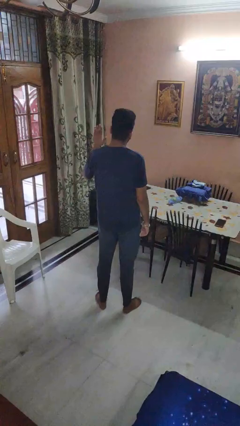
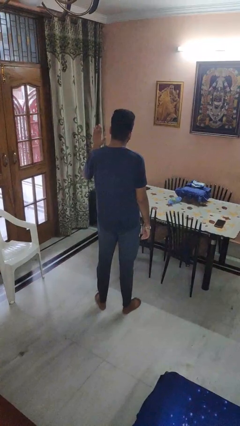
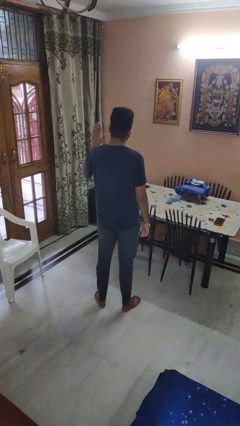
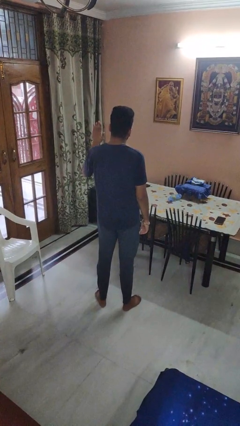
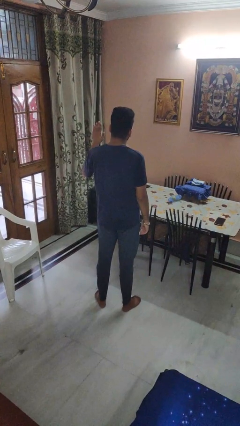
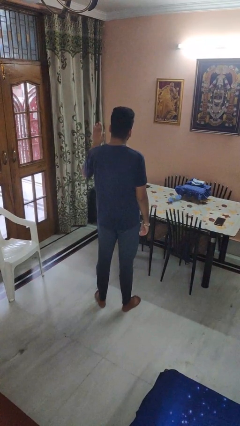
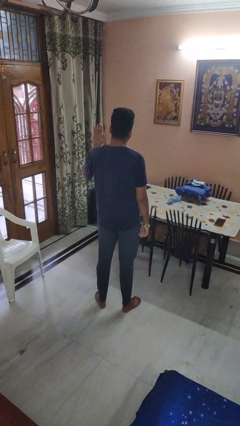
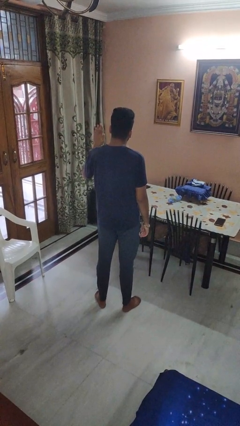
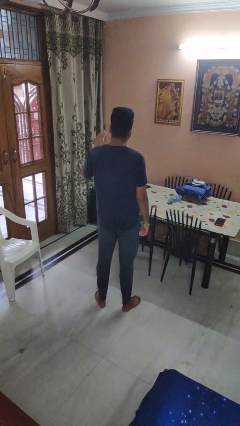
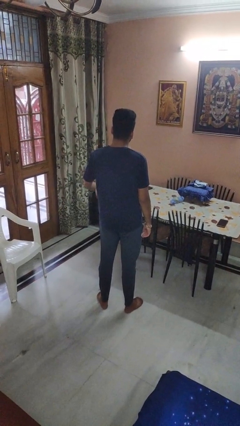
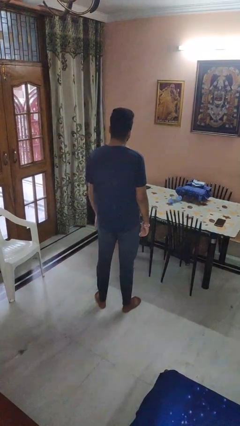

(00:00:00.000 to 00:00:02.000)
person gestures number five

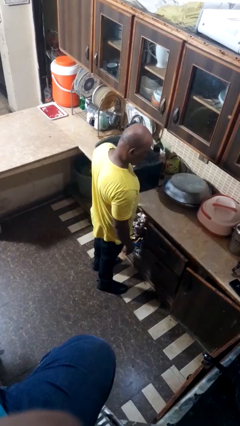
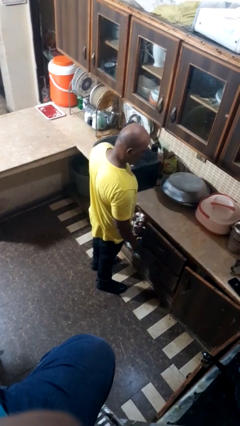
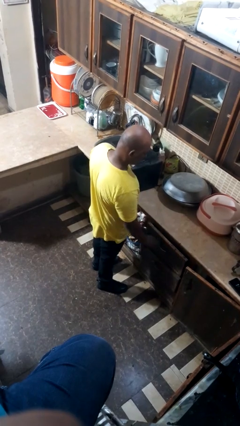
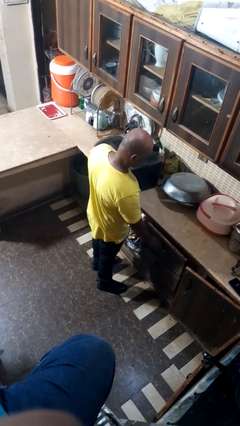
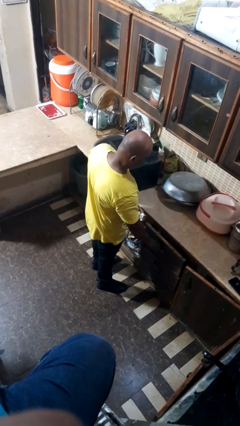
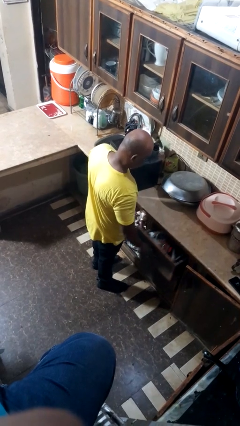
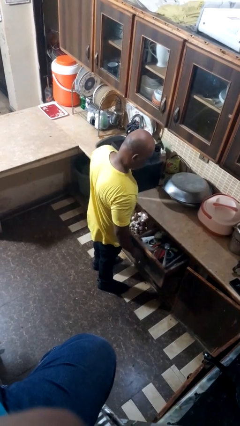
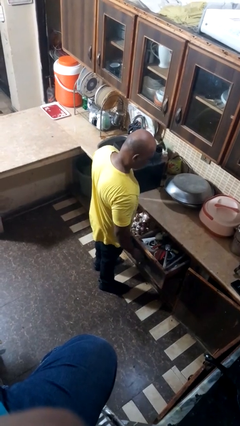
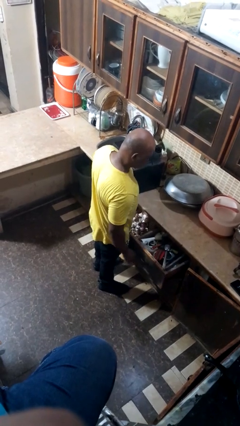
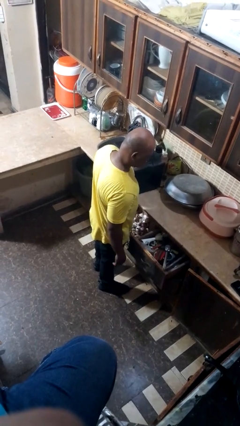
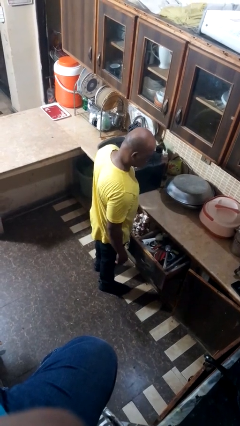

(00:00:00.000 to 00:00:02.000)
person opens dresser drawer

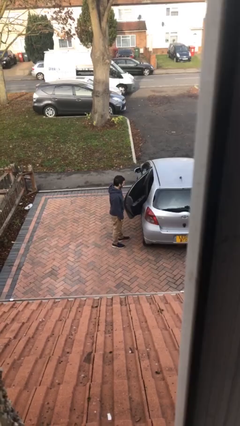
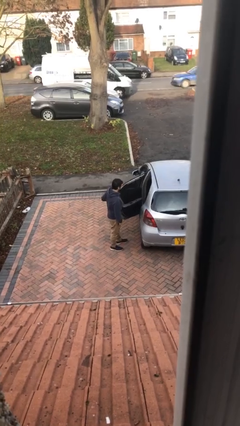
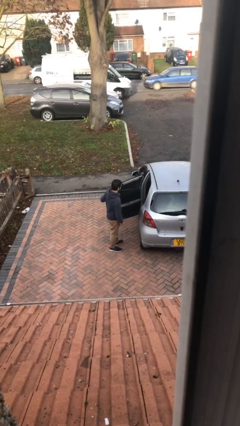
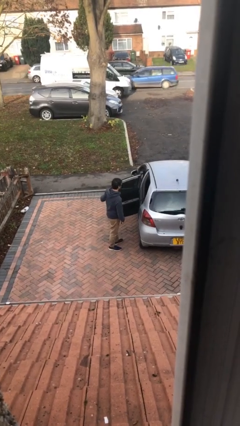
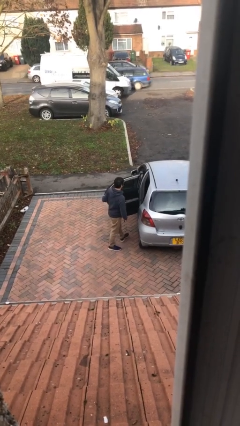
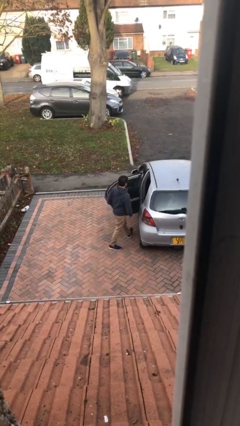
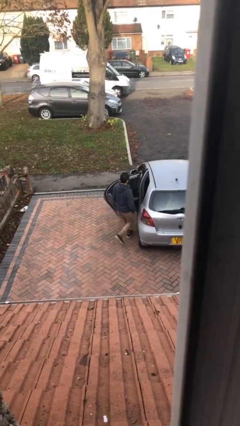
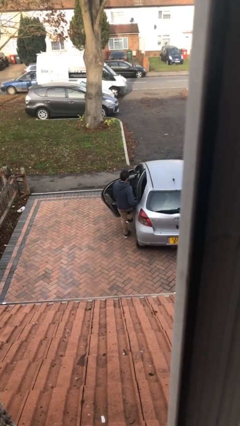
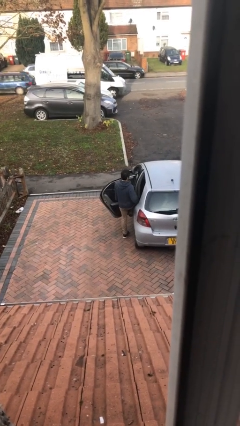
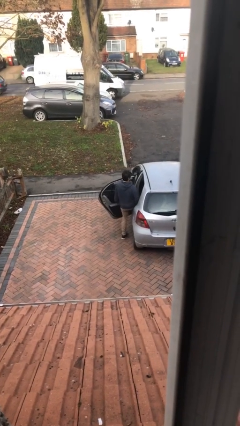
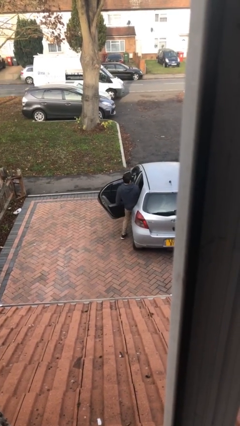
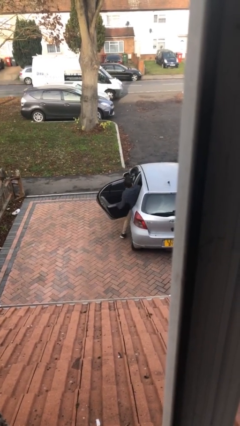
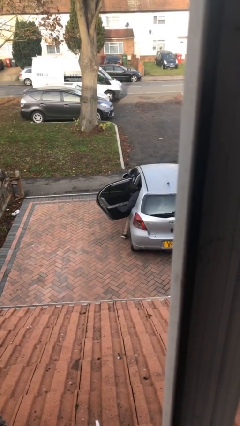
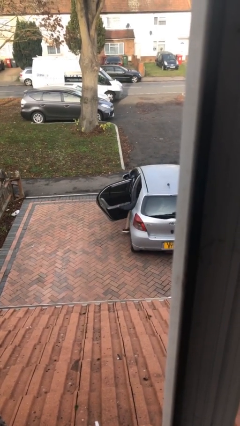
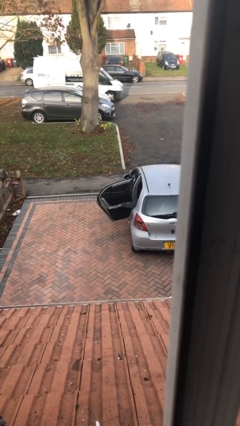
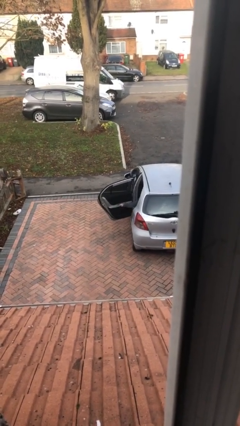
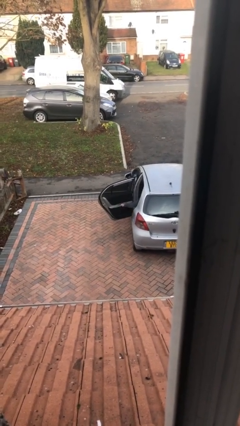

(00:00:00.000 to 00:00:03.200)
person enters car

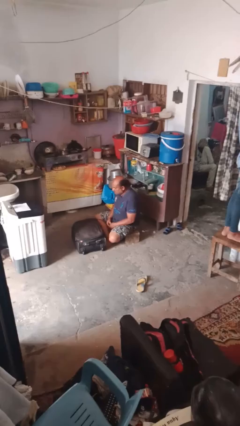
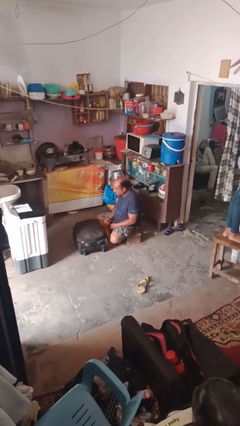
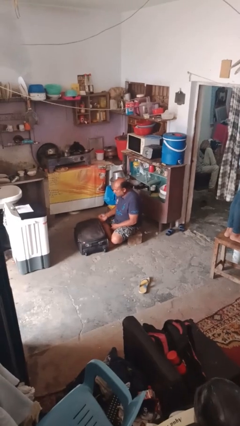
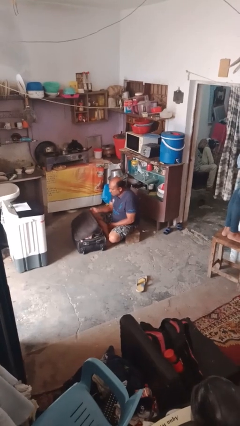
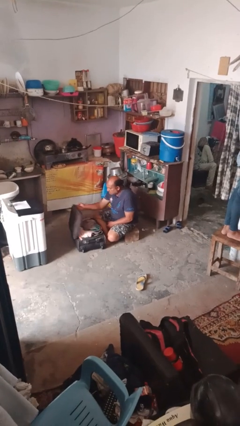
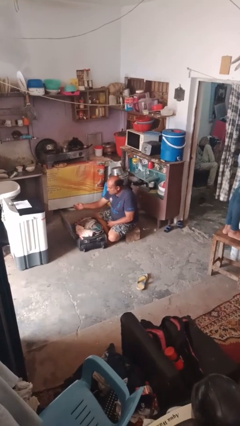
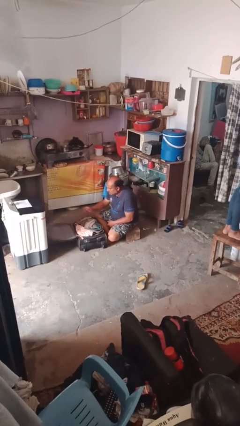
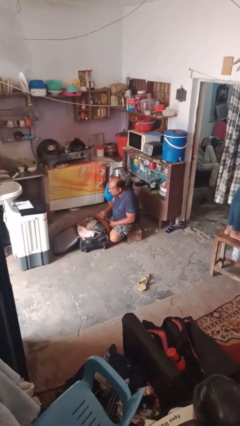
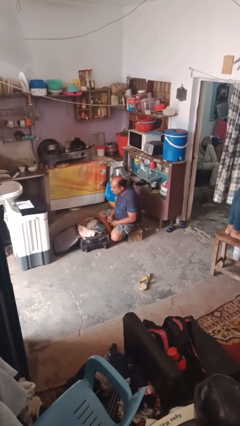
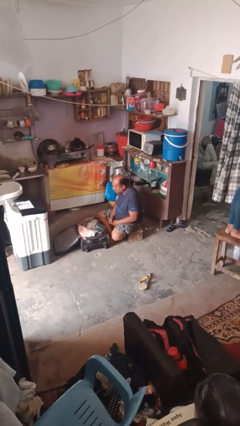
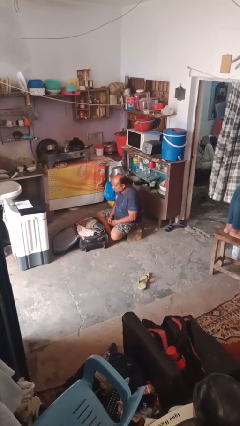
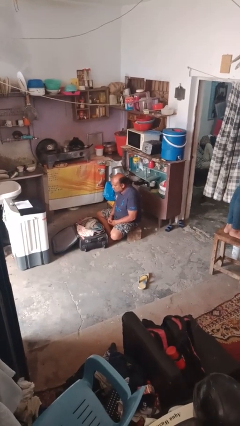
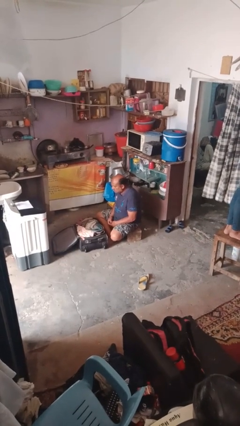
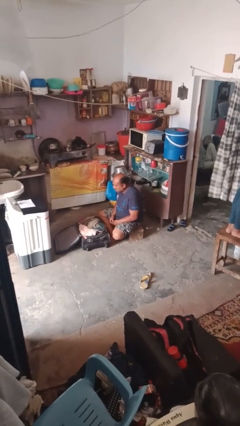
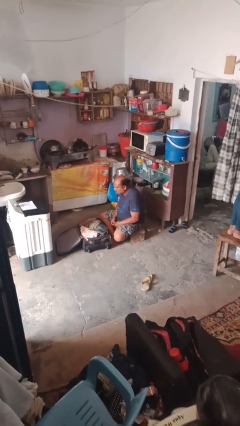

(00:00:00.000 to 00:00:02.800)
person opens suitcase

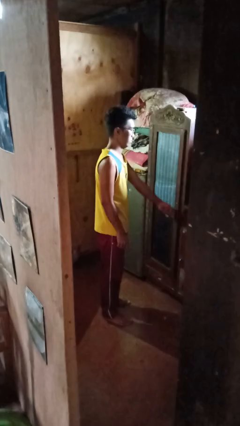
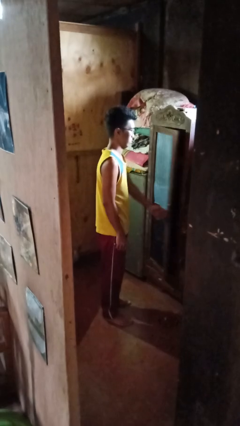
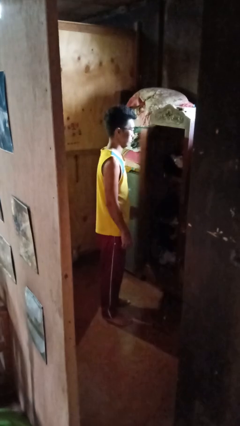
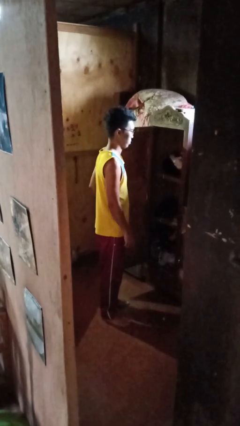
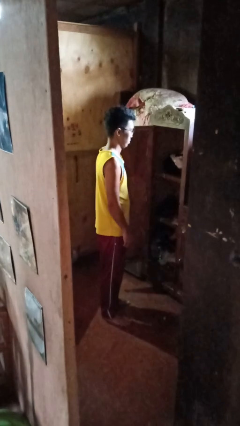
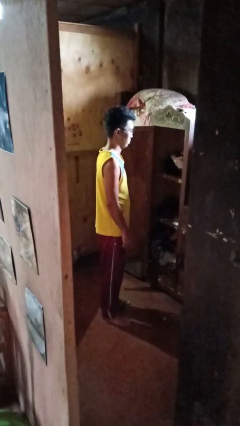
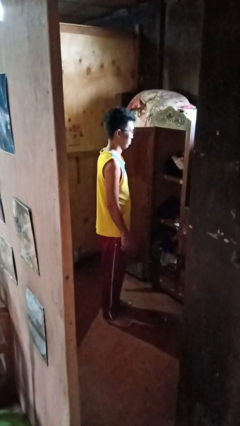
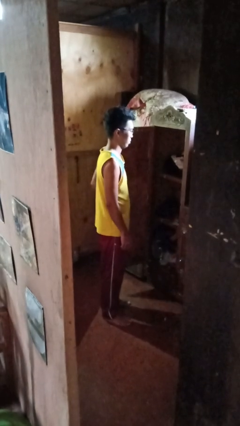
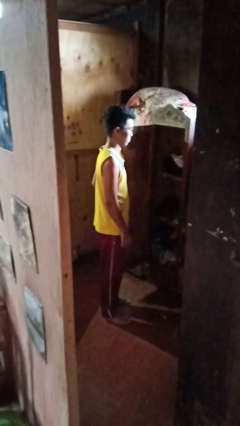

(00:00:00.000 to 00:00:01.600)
person opens closet door

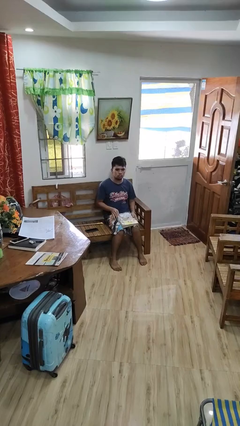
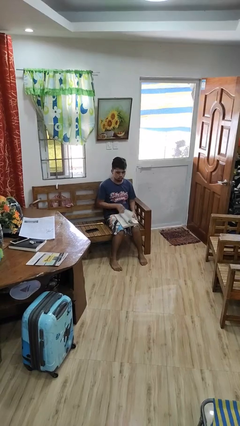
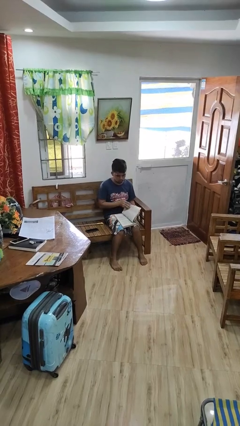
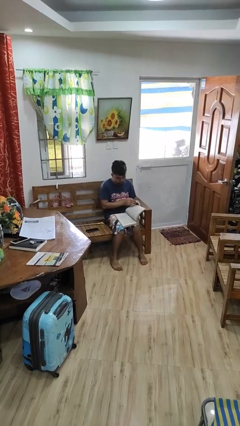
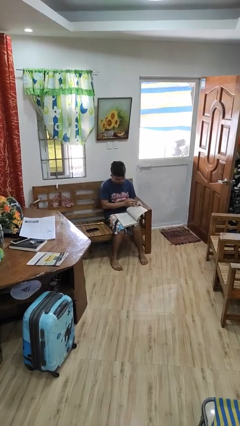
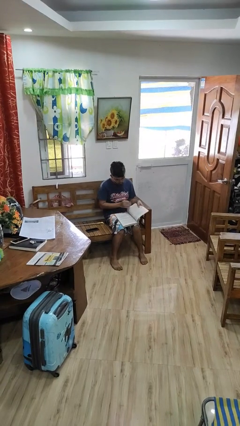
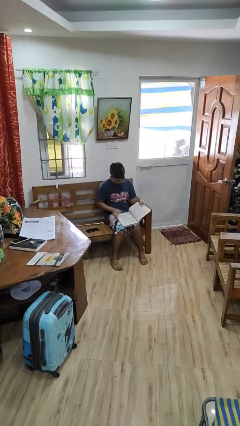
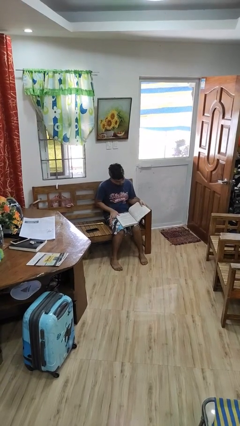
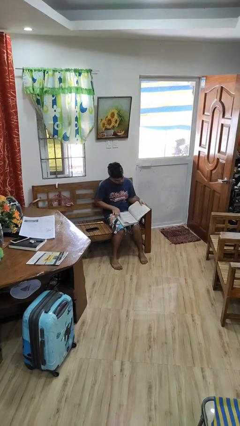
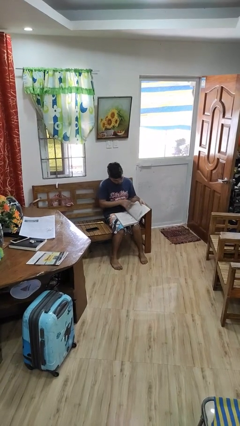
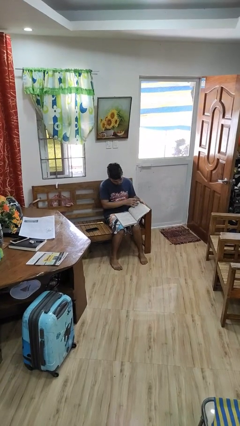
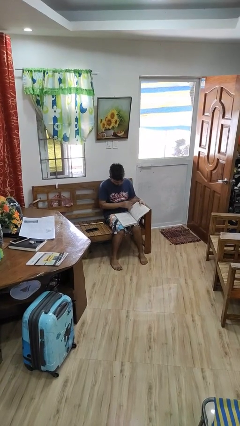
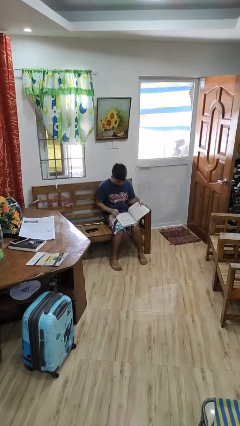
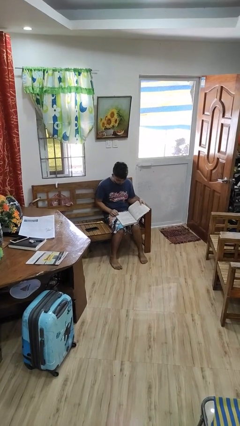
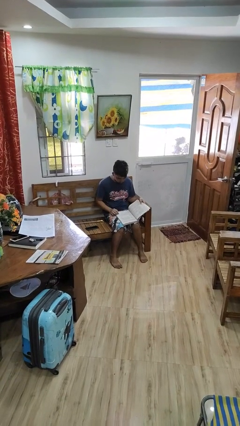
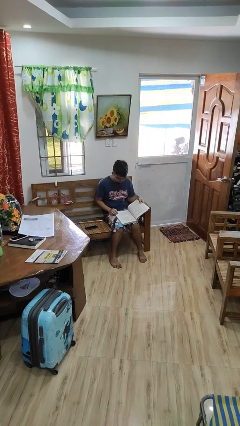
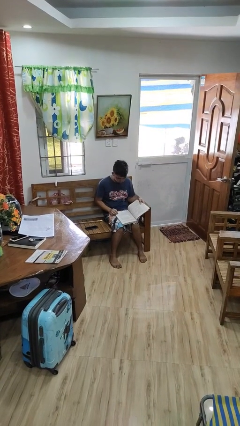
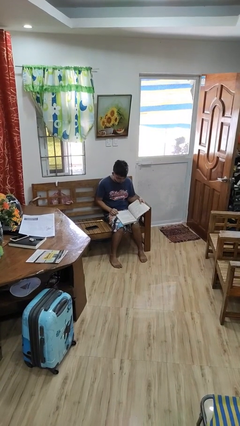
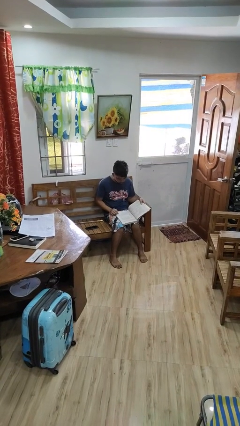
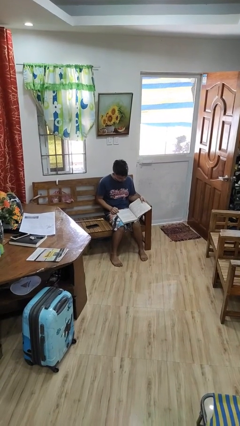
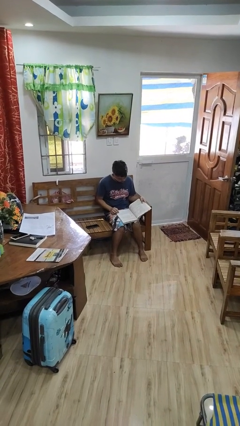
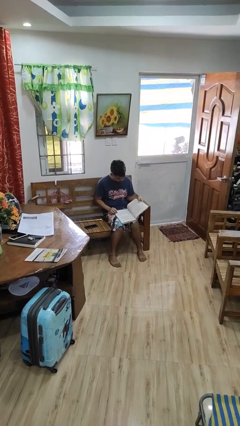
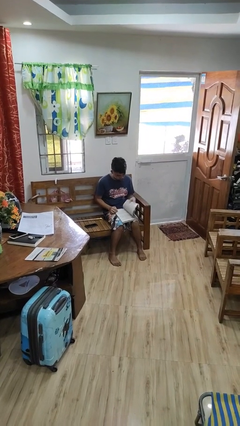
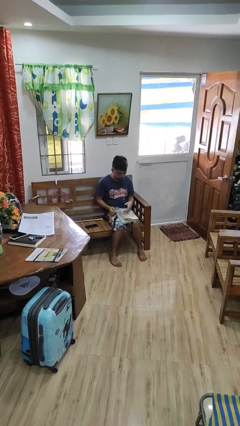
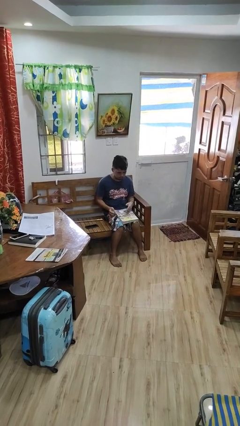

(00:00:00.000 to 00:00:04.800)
person reads book

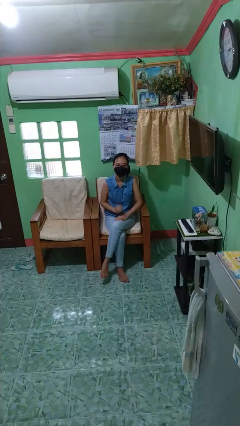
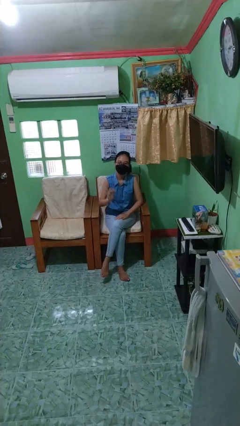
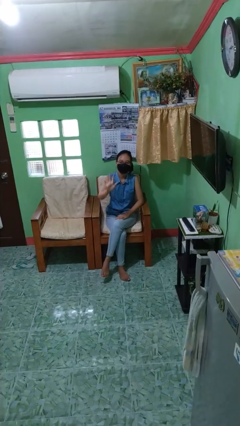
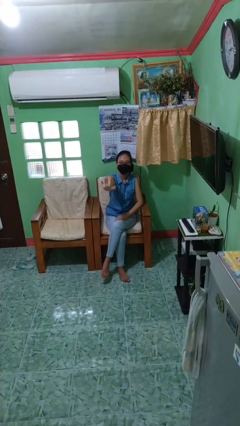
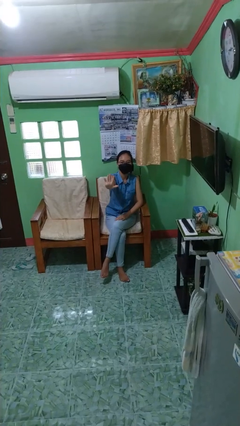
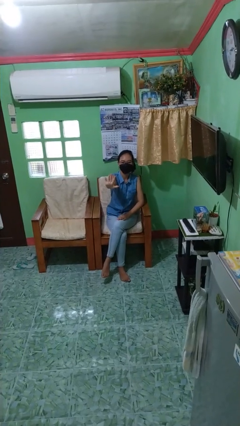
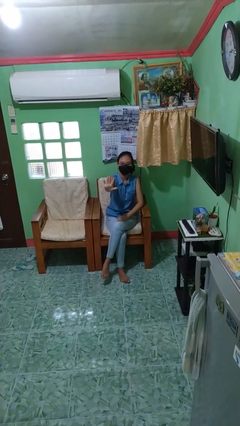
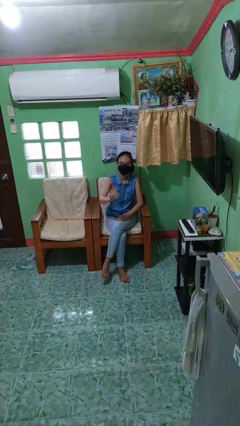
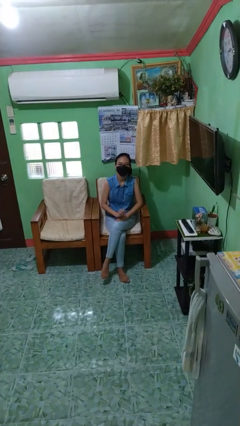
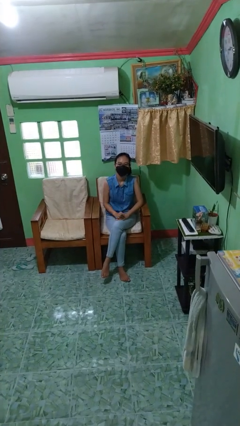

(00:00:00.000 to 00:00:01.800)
person gestures stop
